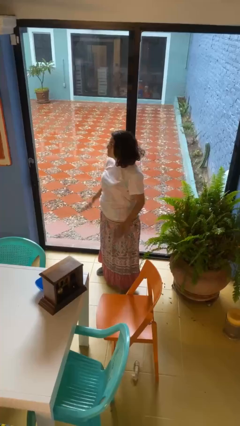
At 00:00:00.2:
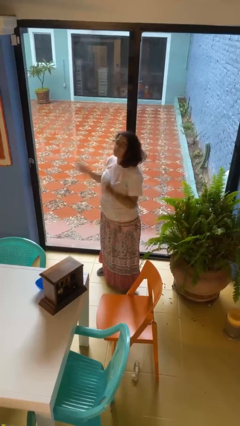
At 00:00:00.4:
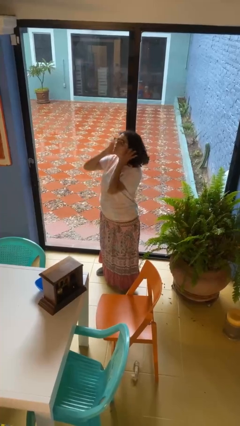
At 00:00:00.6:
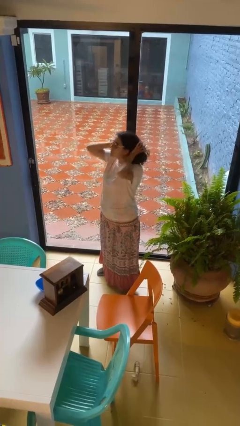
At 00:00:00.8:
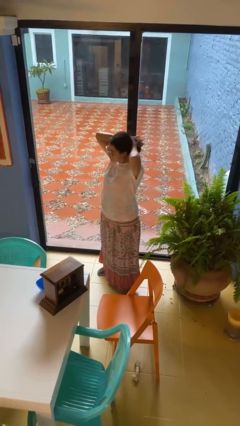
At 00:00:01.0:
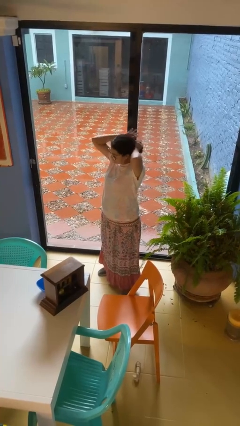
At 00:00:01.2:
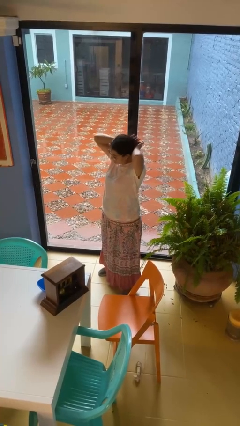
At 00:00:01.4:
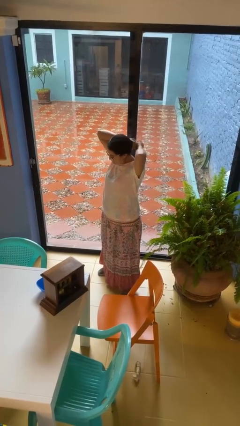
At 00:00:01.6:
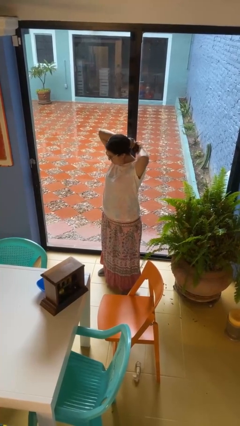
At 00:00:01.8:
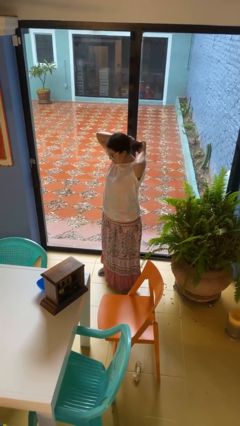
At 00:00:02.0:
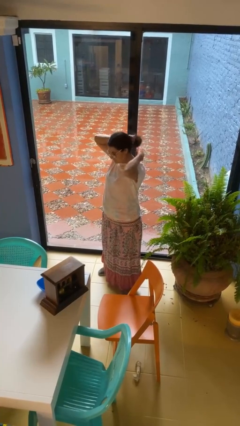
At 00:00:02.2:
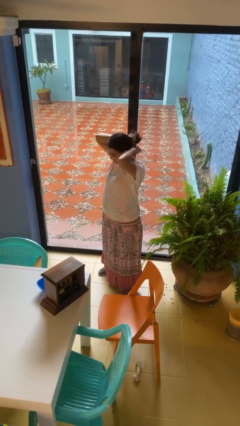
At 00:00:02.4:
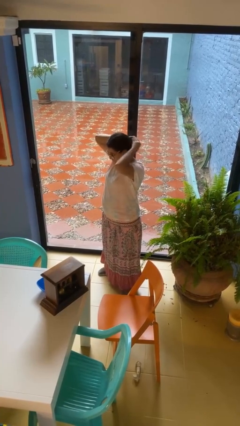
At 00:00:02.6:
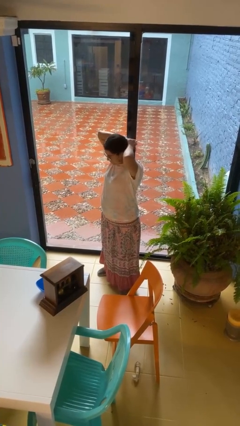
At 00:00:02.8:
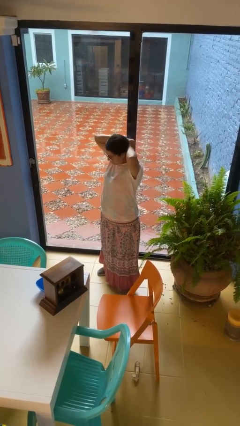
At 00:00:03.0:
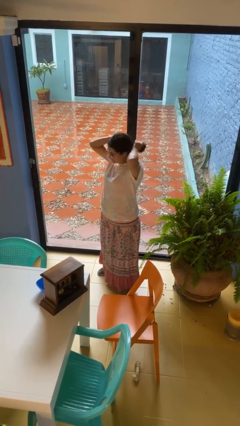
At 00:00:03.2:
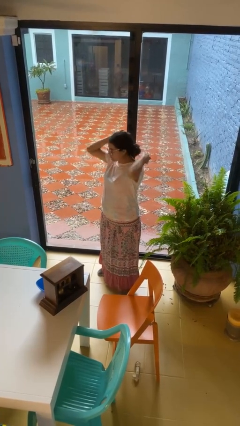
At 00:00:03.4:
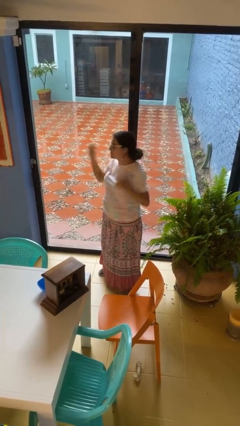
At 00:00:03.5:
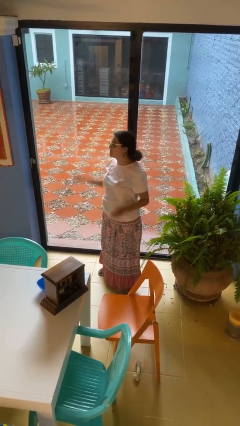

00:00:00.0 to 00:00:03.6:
person puts hair in ponytail

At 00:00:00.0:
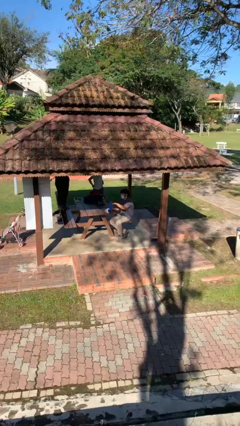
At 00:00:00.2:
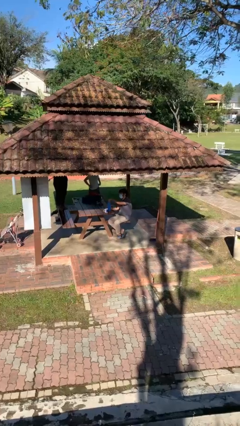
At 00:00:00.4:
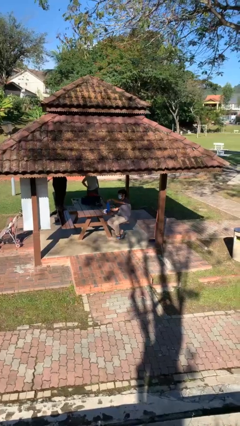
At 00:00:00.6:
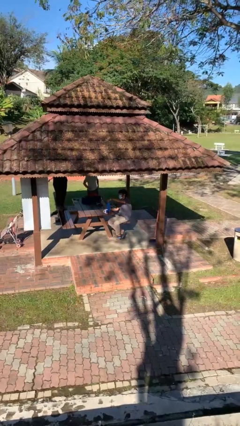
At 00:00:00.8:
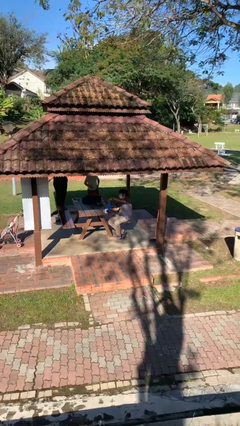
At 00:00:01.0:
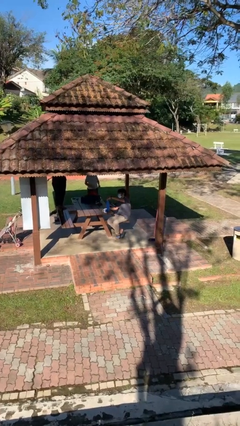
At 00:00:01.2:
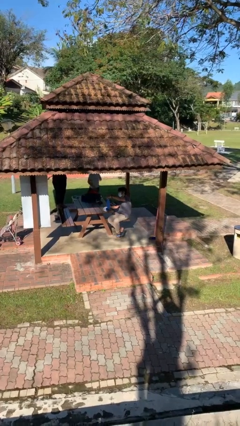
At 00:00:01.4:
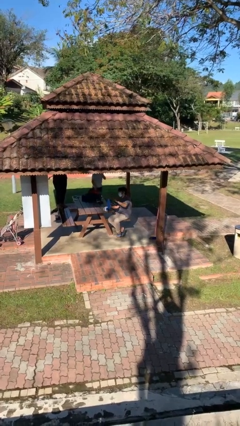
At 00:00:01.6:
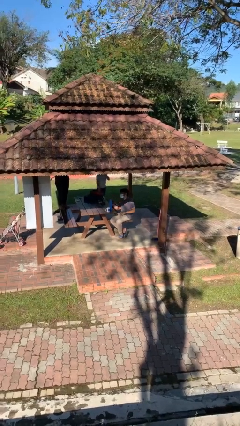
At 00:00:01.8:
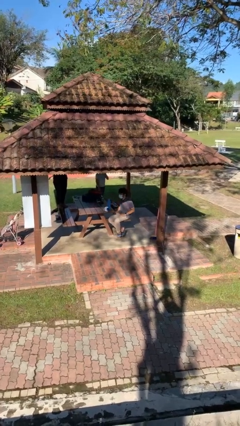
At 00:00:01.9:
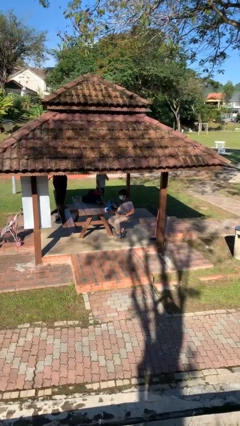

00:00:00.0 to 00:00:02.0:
person screws lid to bottle

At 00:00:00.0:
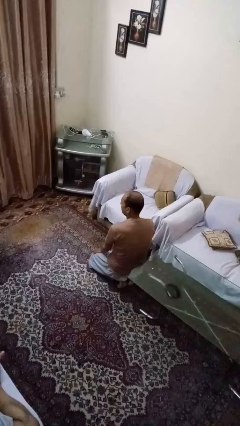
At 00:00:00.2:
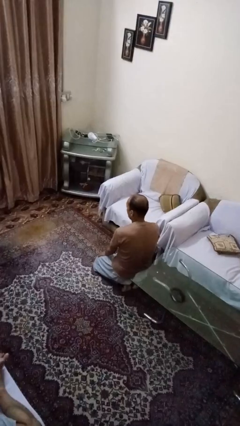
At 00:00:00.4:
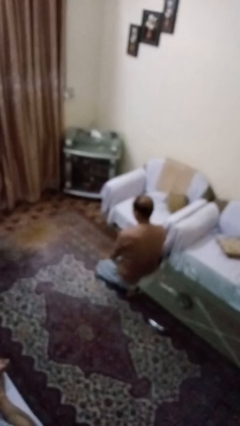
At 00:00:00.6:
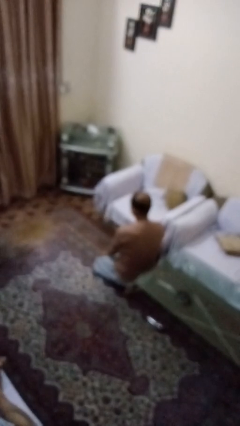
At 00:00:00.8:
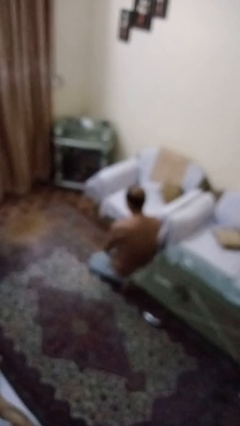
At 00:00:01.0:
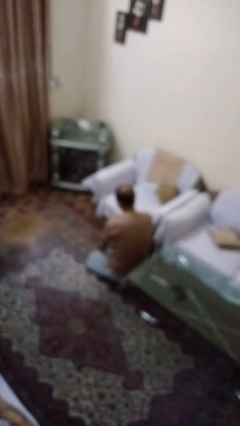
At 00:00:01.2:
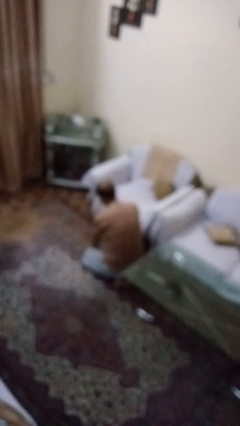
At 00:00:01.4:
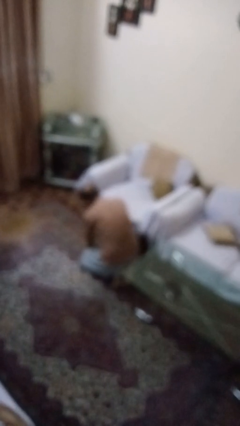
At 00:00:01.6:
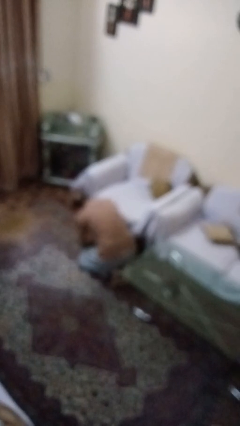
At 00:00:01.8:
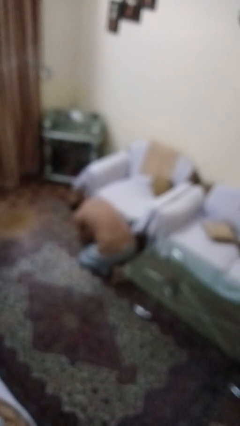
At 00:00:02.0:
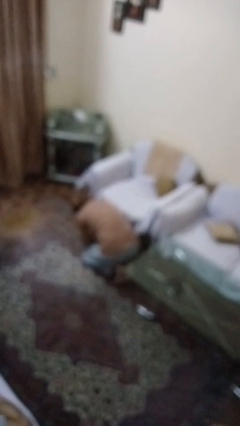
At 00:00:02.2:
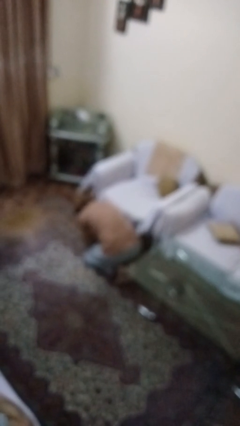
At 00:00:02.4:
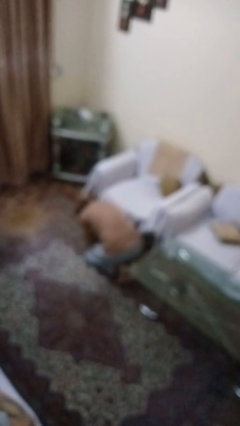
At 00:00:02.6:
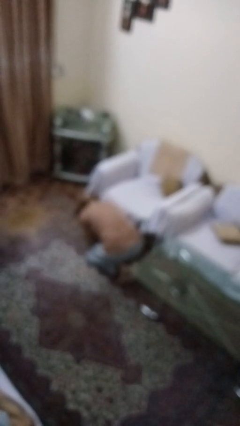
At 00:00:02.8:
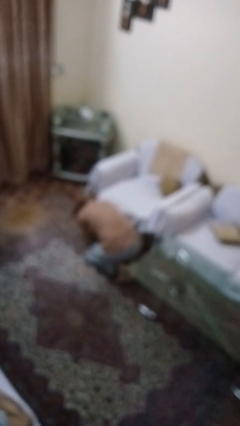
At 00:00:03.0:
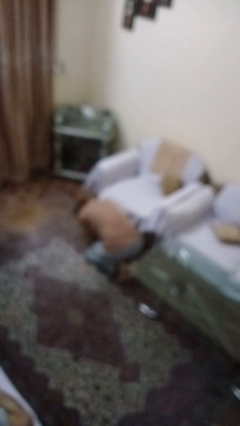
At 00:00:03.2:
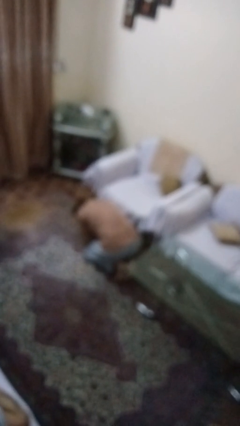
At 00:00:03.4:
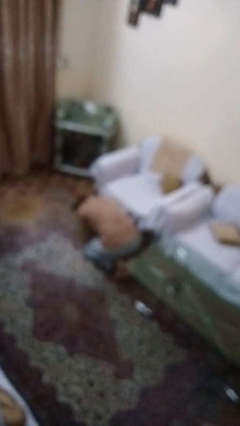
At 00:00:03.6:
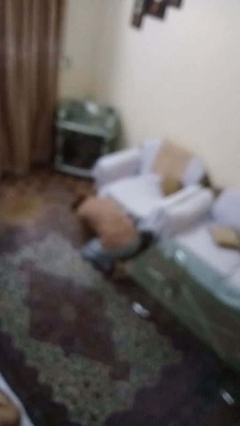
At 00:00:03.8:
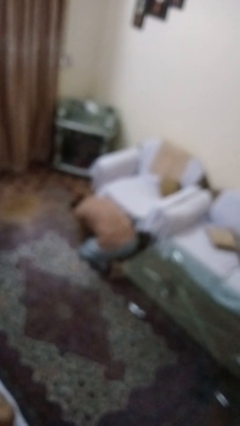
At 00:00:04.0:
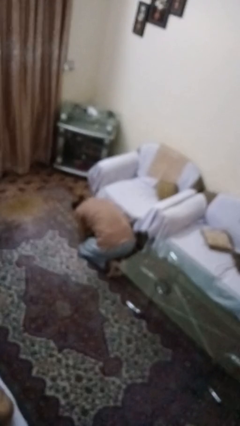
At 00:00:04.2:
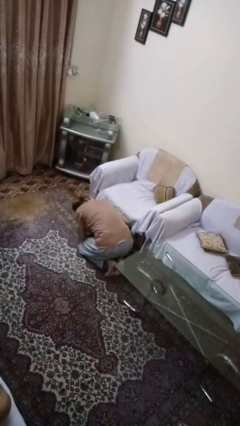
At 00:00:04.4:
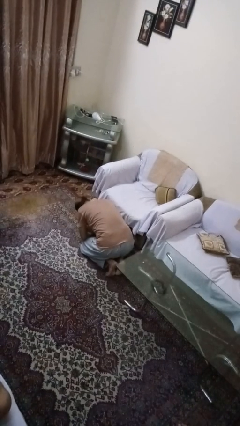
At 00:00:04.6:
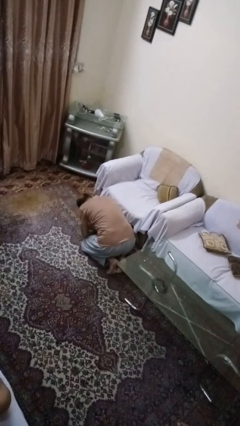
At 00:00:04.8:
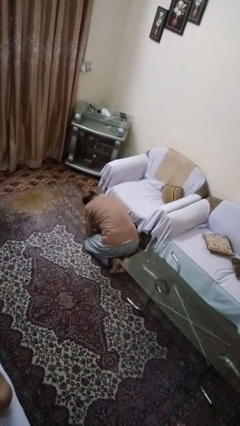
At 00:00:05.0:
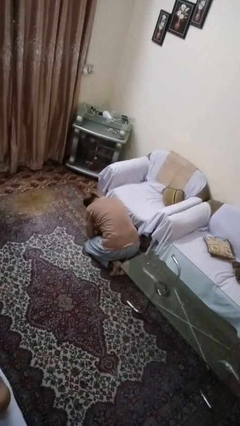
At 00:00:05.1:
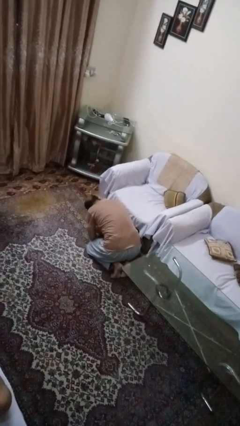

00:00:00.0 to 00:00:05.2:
person searches under couch

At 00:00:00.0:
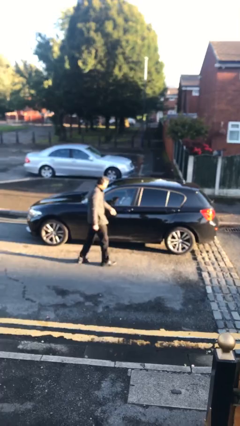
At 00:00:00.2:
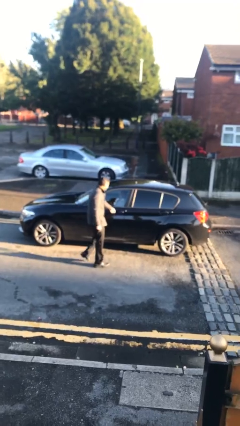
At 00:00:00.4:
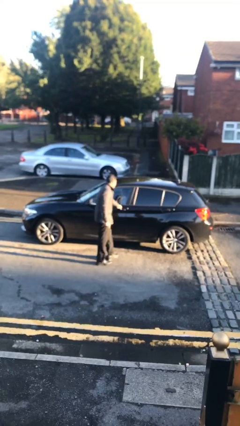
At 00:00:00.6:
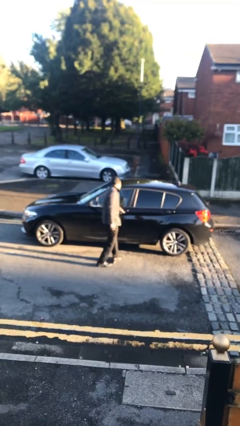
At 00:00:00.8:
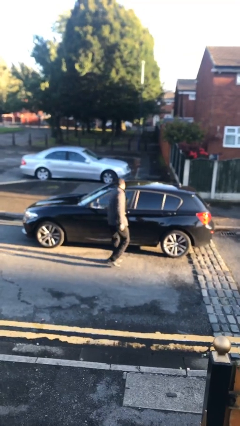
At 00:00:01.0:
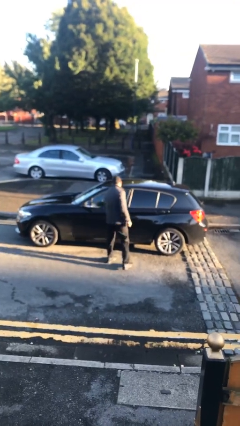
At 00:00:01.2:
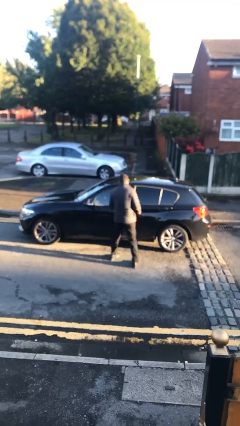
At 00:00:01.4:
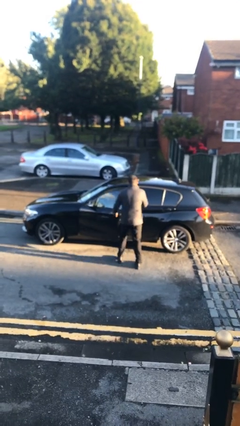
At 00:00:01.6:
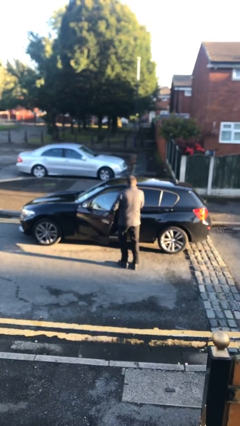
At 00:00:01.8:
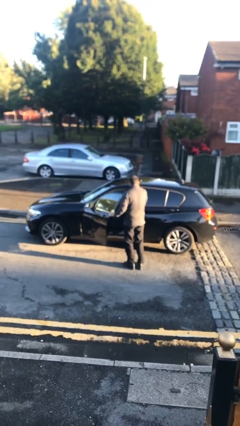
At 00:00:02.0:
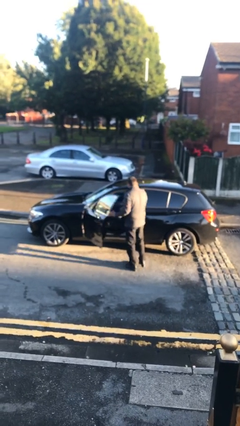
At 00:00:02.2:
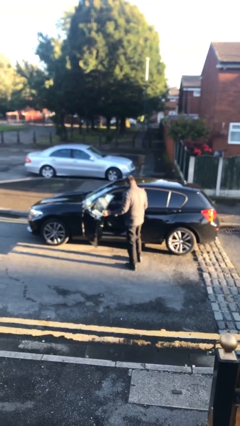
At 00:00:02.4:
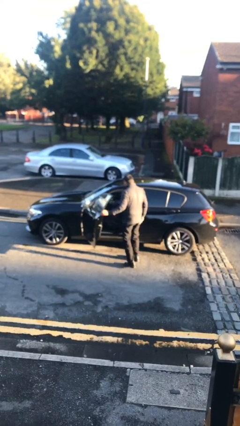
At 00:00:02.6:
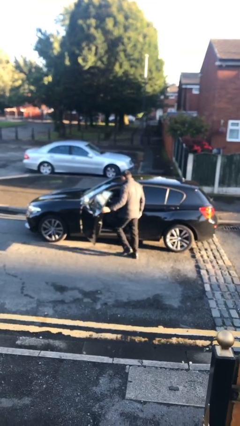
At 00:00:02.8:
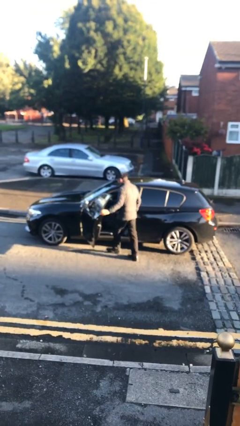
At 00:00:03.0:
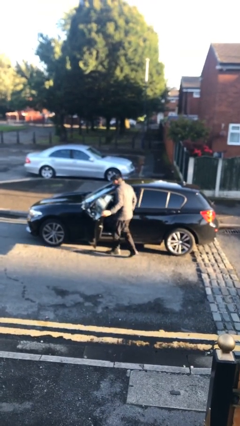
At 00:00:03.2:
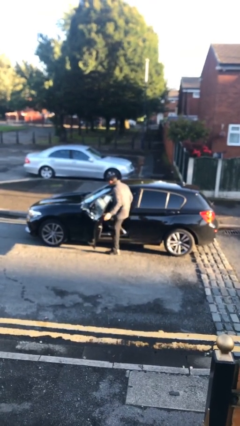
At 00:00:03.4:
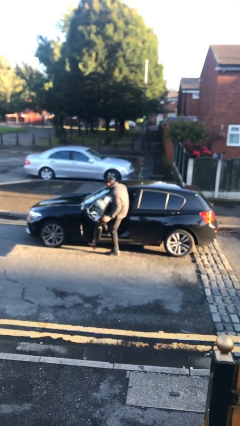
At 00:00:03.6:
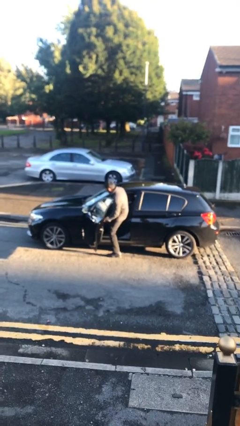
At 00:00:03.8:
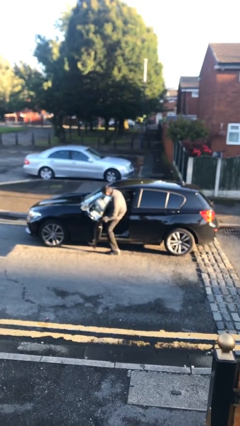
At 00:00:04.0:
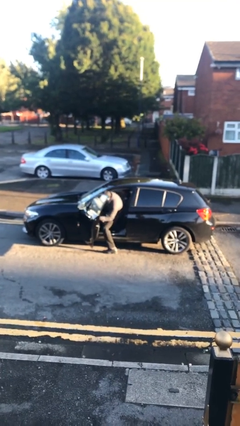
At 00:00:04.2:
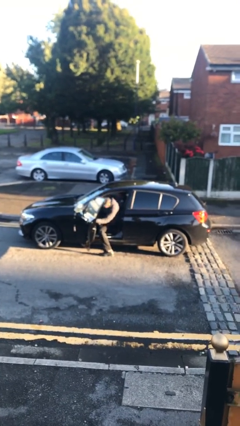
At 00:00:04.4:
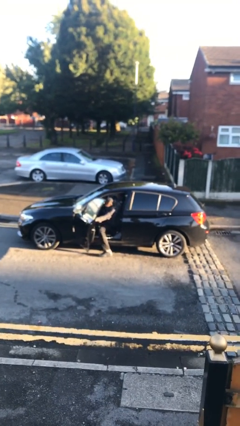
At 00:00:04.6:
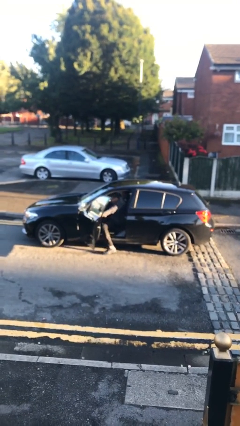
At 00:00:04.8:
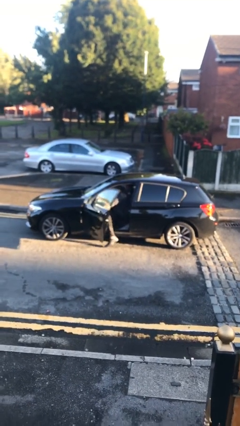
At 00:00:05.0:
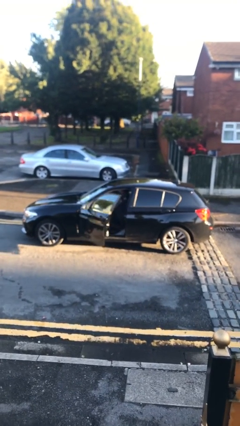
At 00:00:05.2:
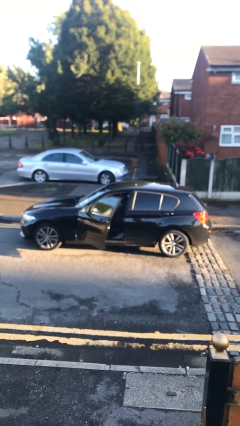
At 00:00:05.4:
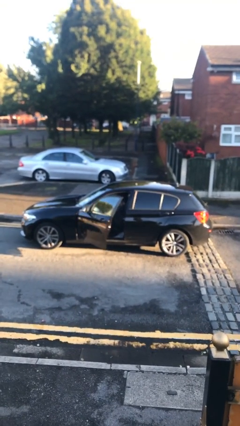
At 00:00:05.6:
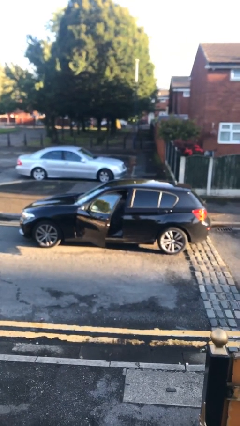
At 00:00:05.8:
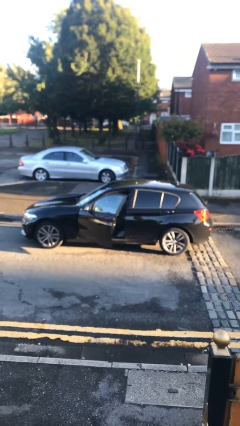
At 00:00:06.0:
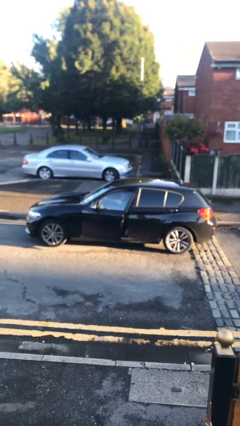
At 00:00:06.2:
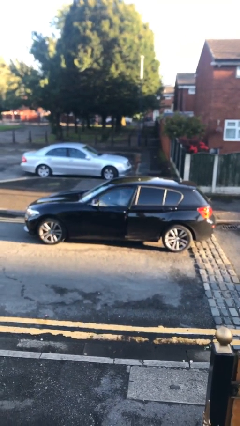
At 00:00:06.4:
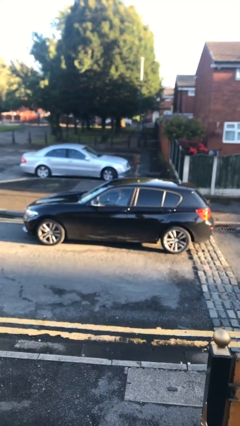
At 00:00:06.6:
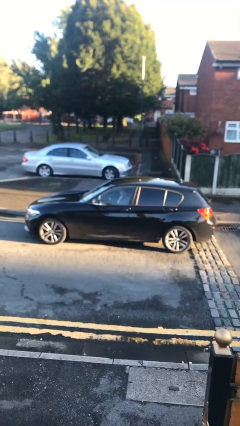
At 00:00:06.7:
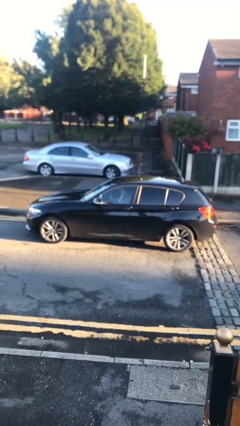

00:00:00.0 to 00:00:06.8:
car picks up person
